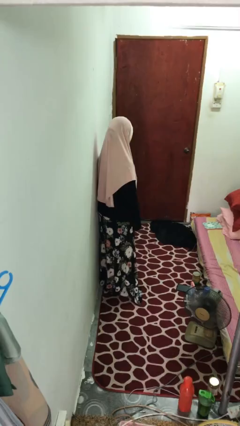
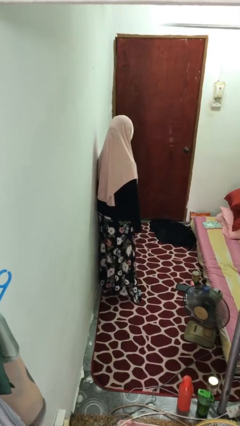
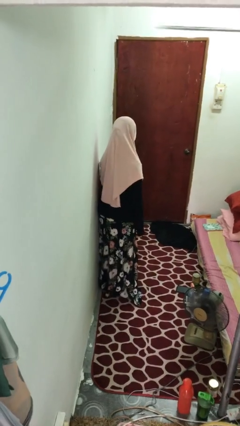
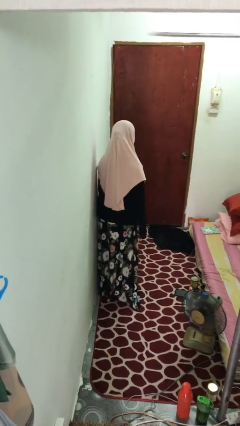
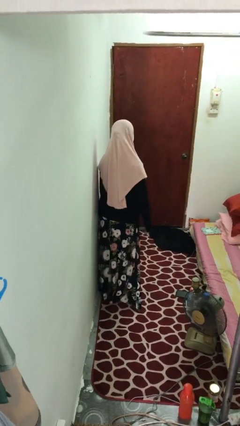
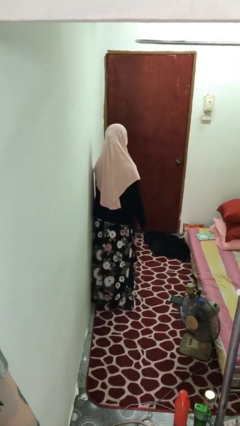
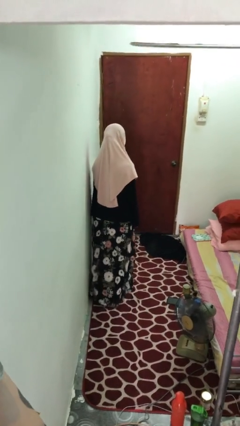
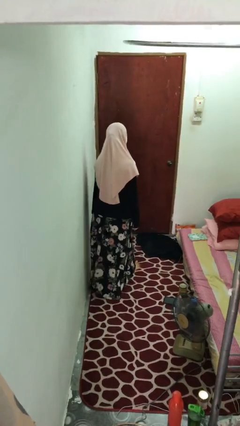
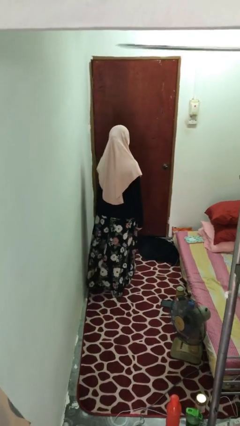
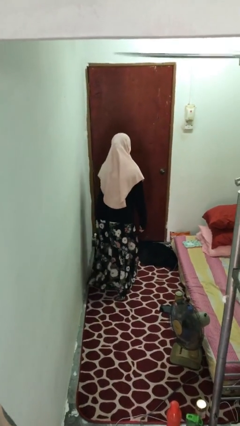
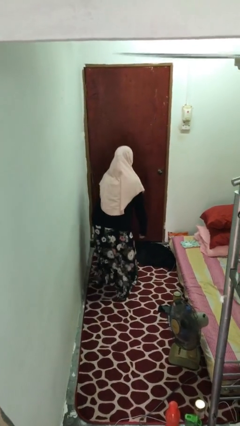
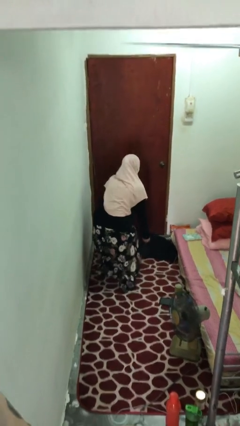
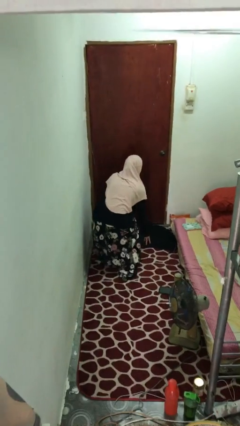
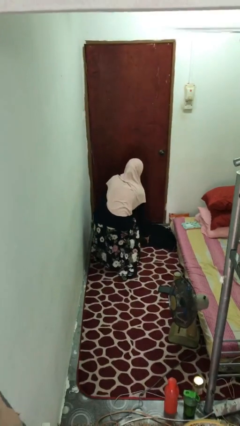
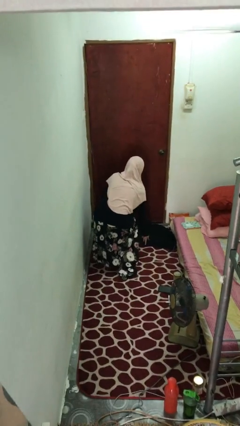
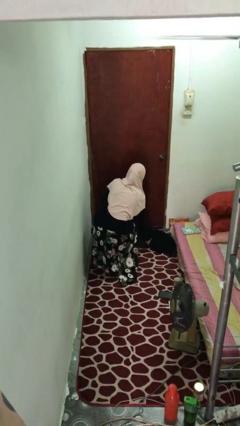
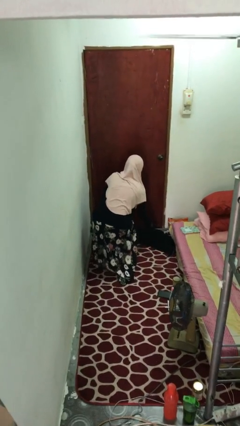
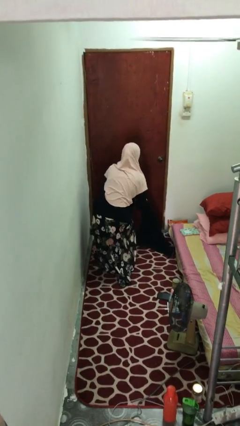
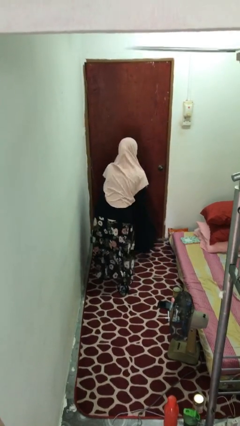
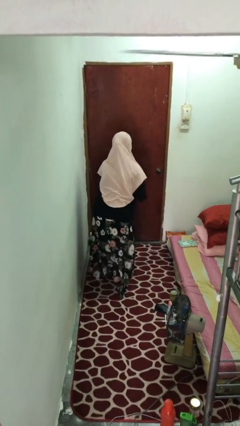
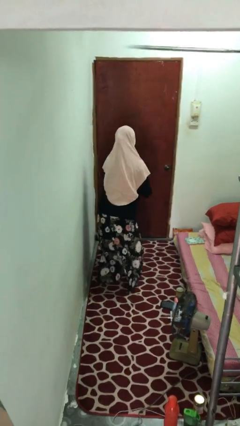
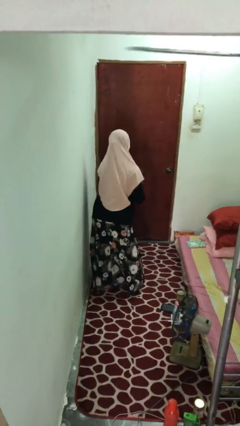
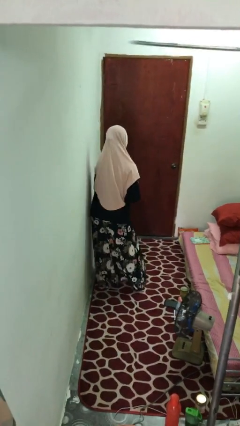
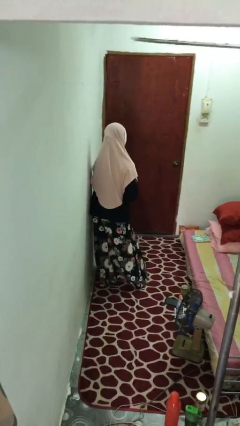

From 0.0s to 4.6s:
person picks up object from floor

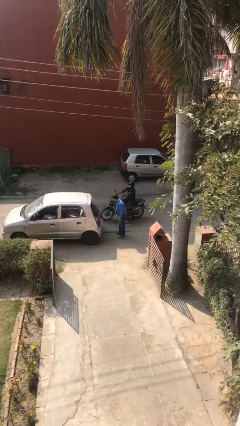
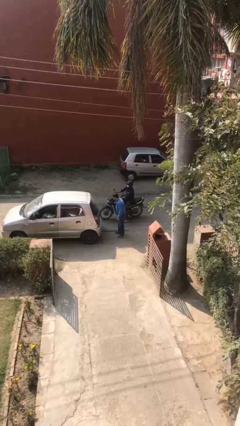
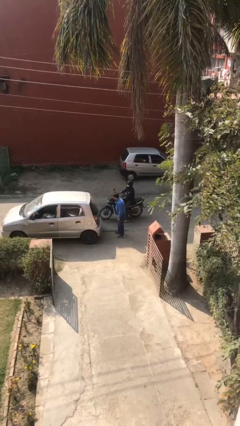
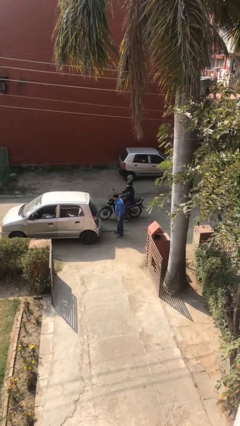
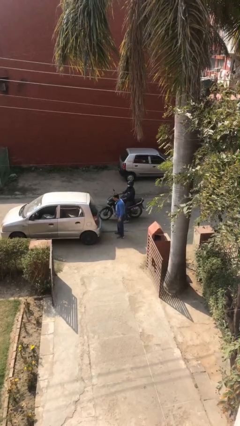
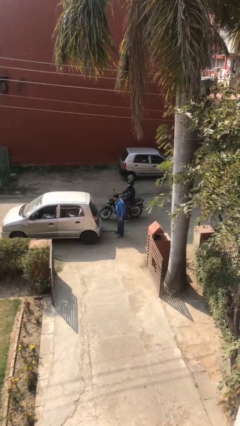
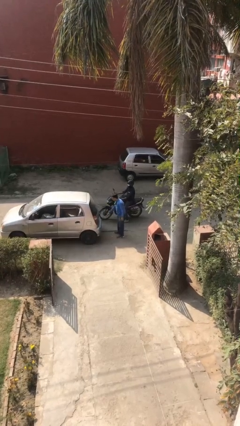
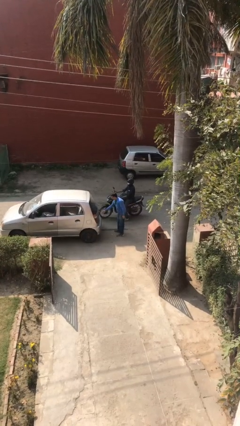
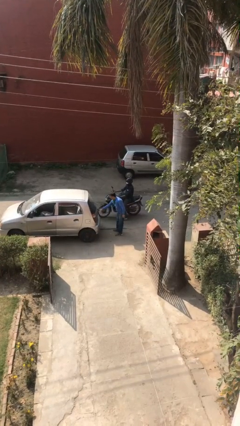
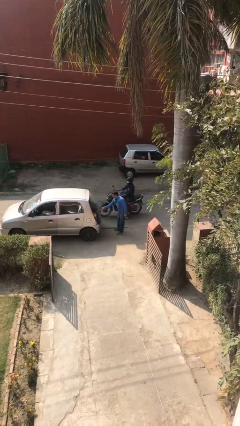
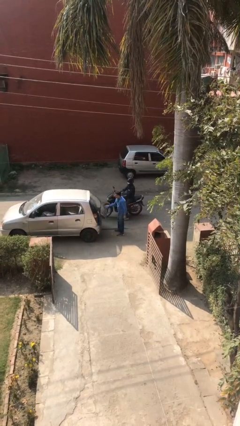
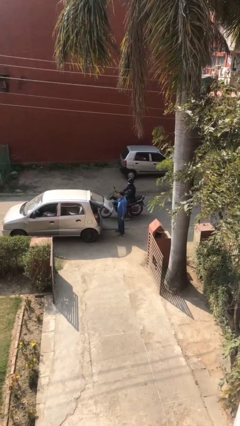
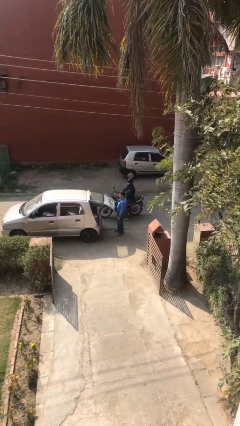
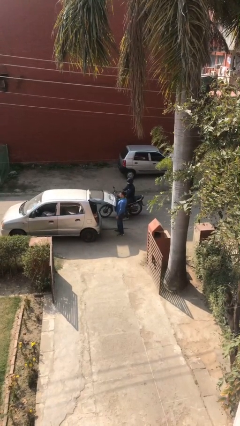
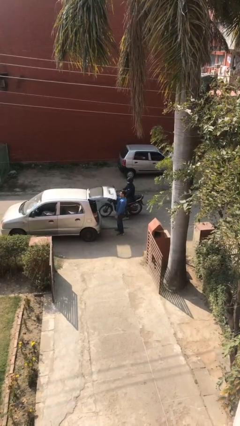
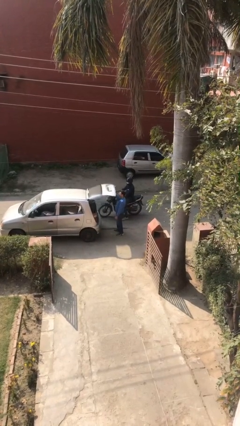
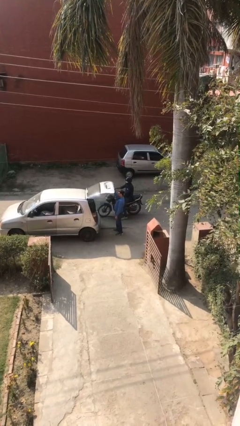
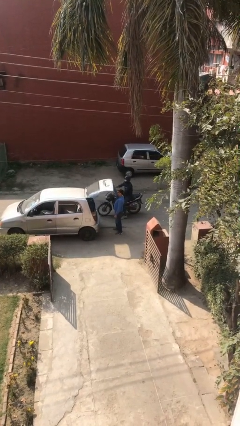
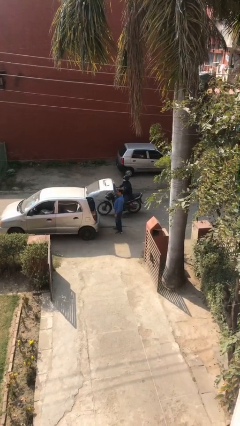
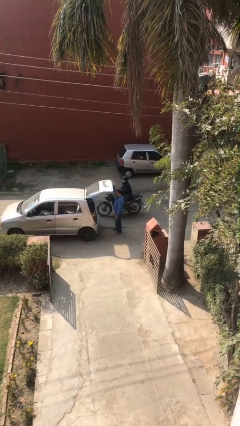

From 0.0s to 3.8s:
person opens car trunk

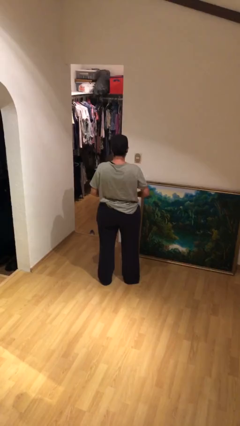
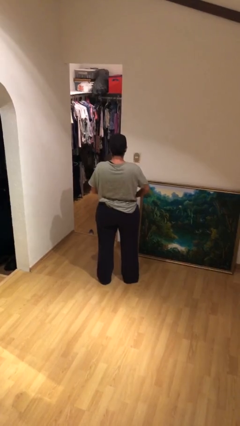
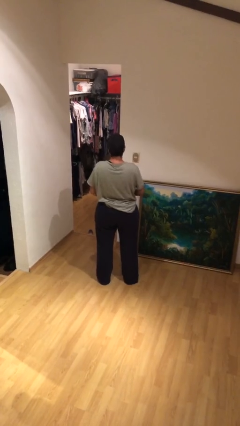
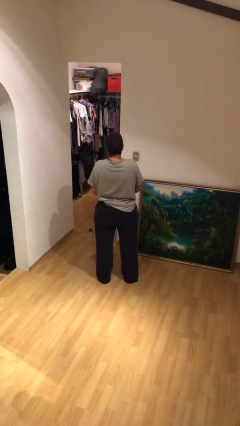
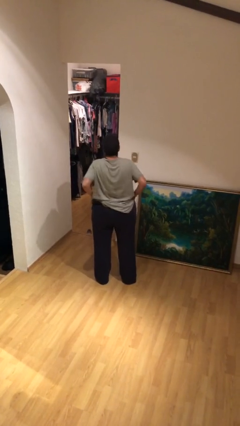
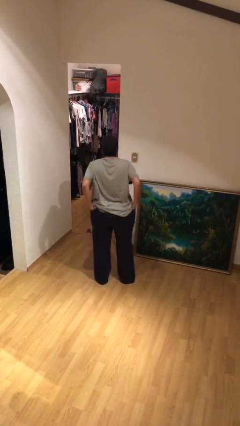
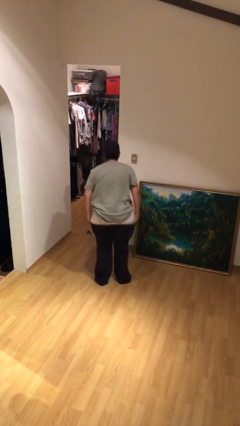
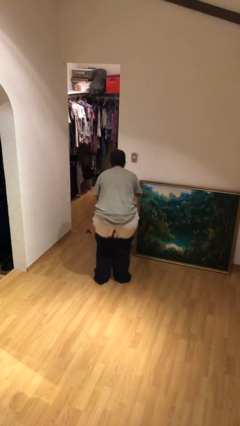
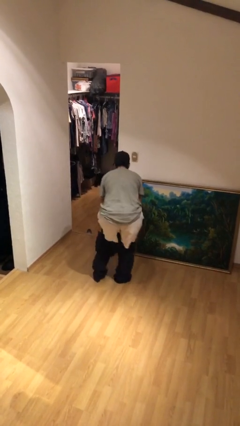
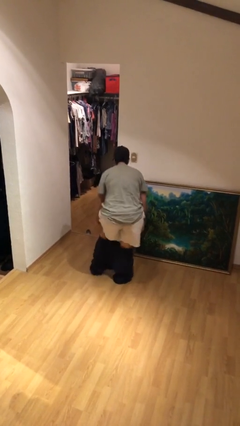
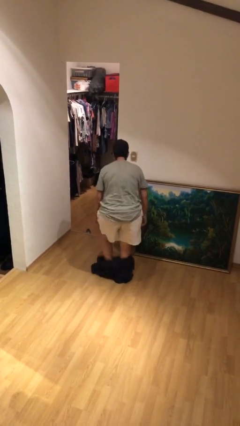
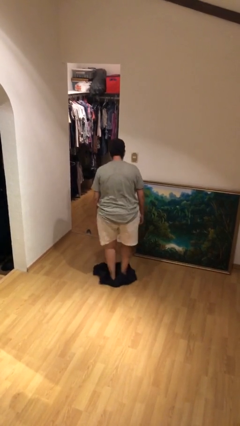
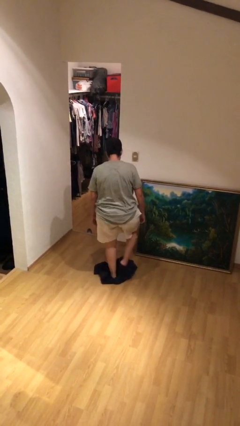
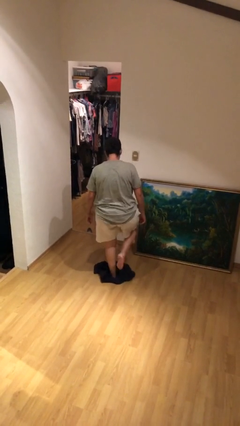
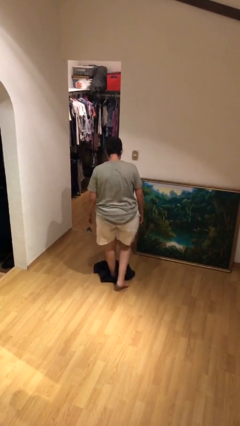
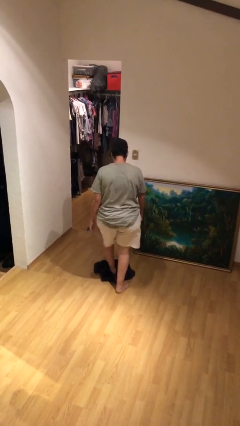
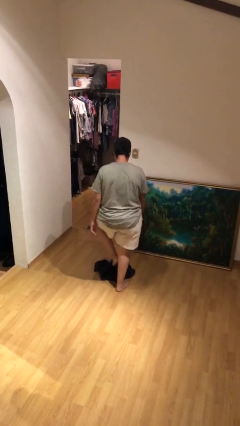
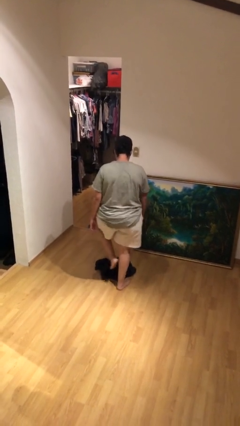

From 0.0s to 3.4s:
person takes off pants

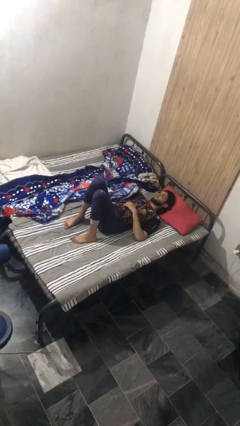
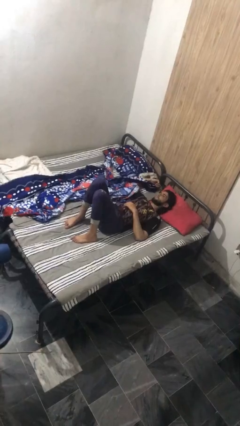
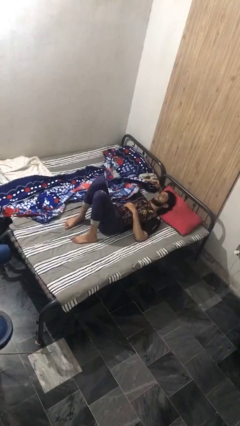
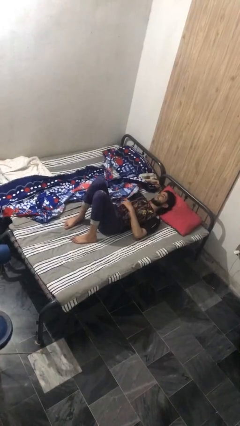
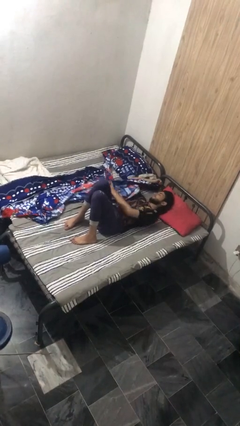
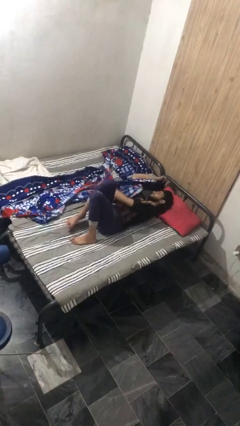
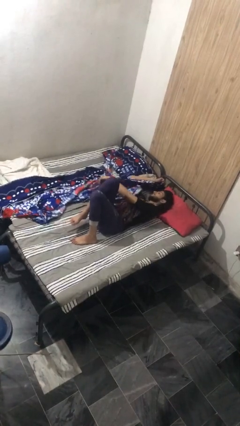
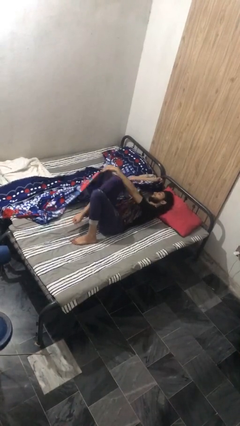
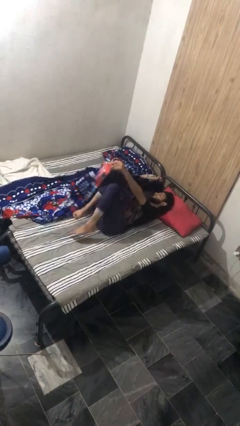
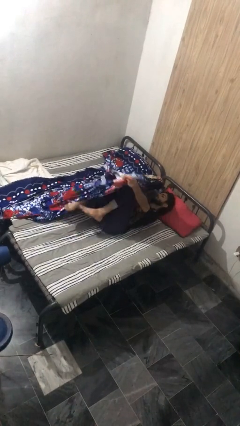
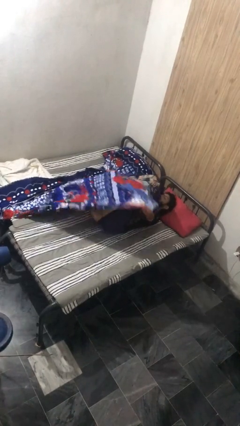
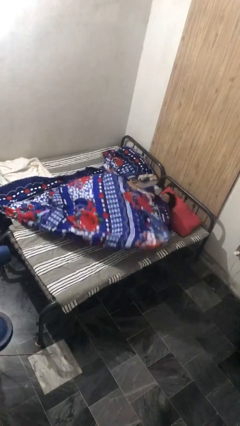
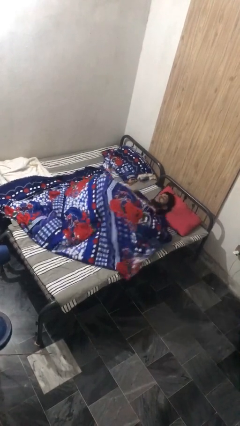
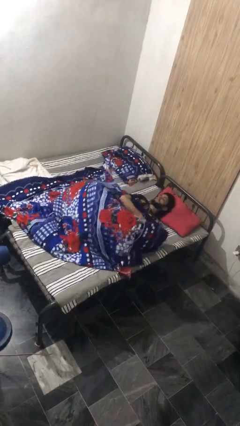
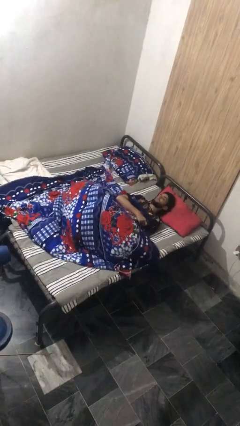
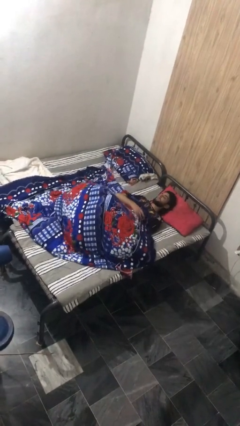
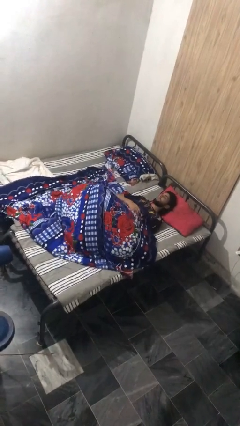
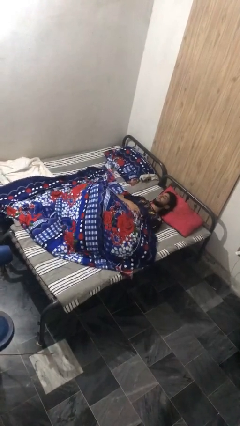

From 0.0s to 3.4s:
person covers with bedsheets

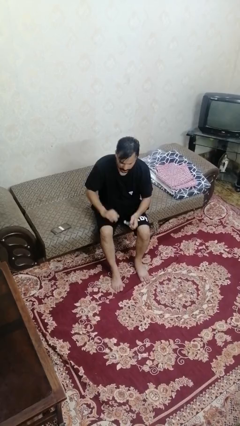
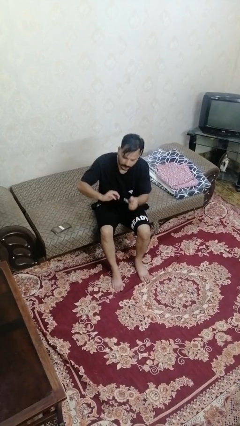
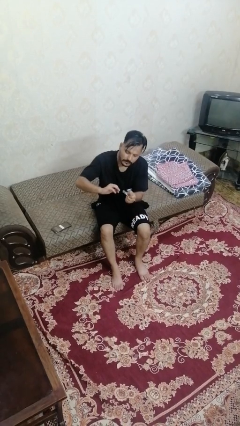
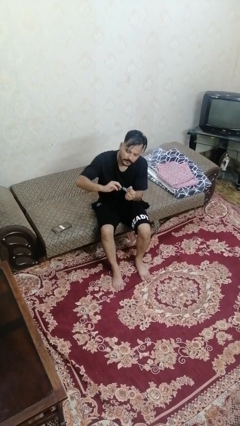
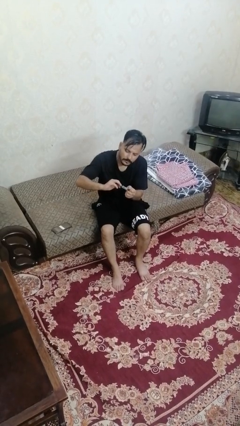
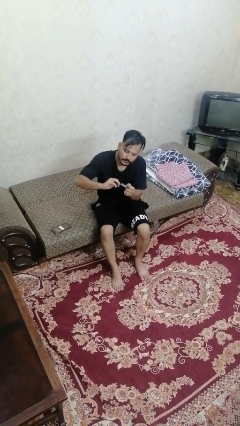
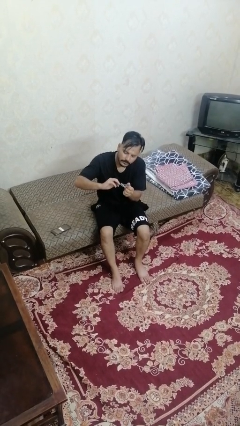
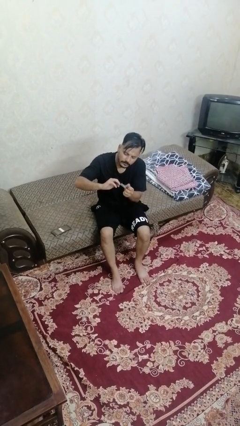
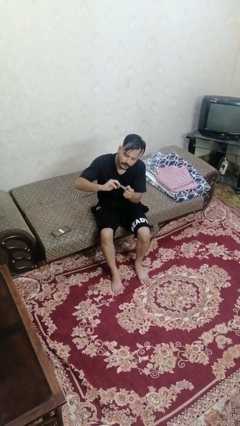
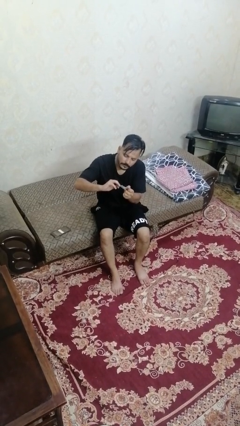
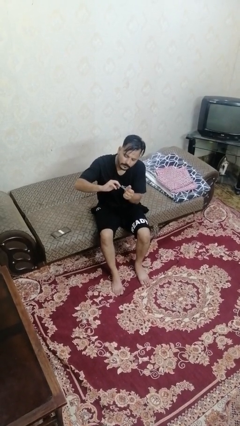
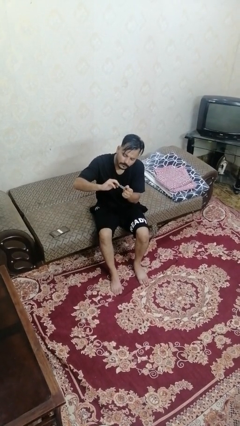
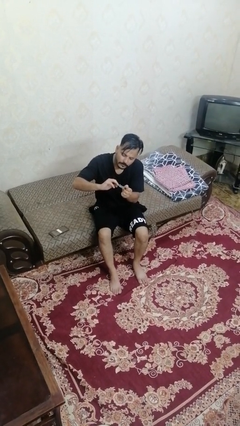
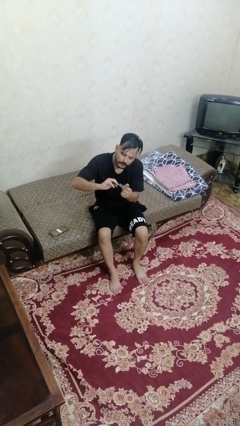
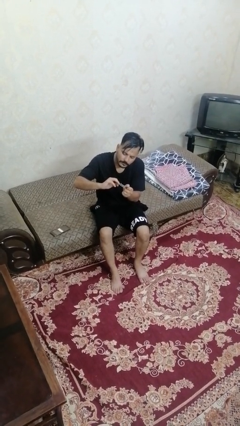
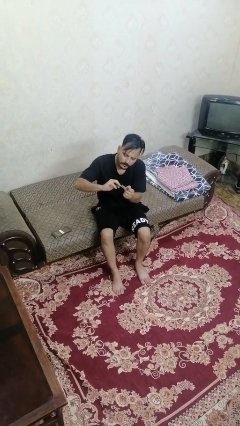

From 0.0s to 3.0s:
person clips fingernails
